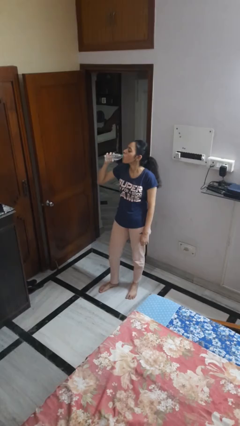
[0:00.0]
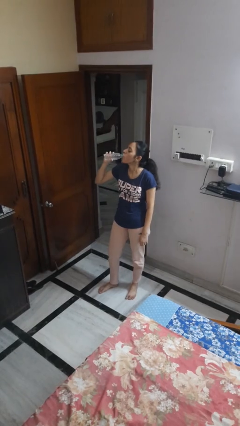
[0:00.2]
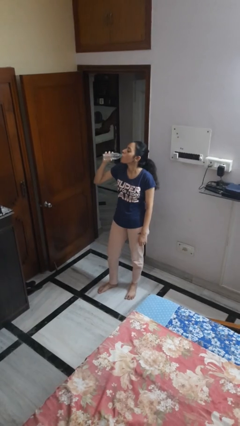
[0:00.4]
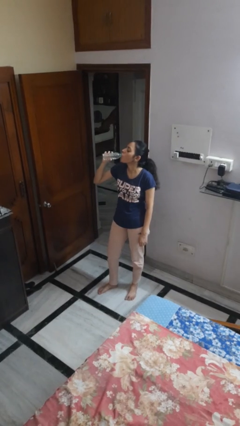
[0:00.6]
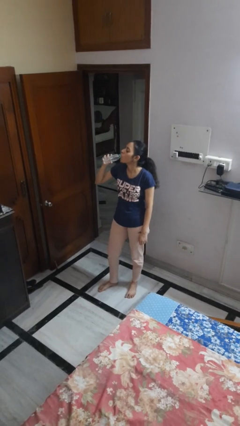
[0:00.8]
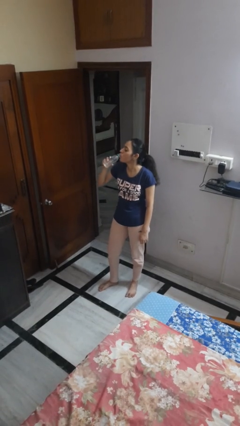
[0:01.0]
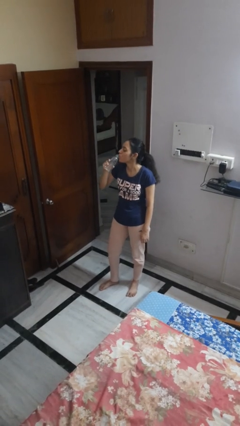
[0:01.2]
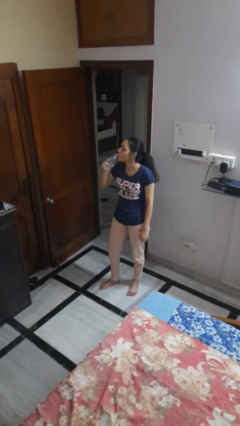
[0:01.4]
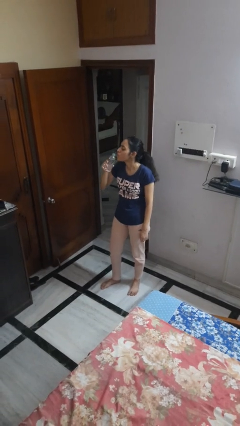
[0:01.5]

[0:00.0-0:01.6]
person drinks from bottle

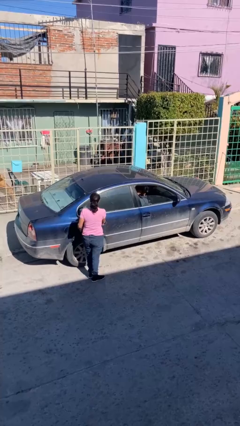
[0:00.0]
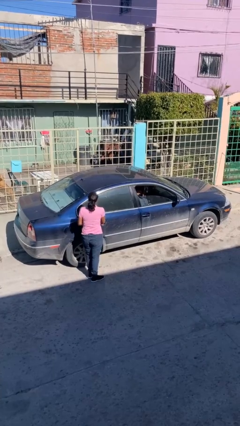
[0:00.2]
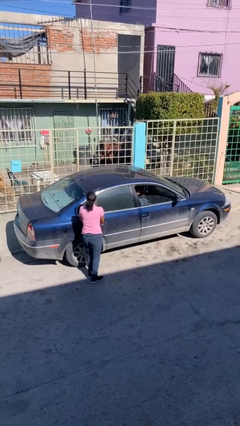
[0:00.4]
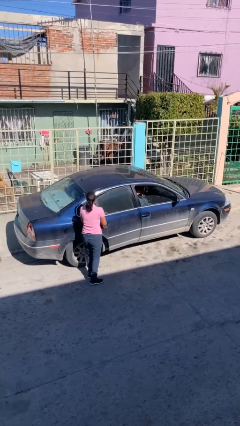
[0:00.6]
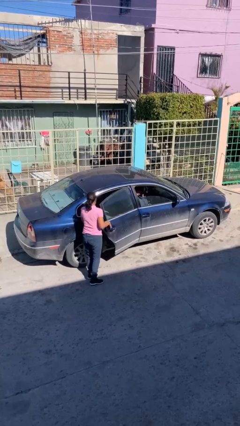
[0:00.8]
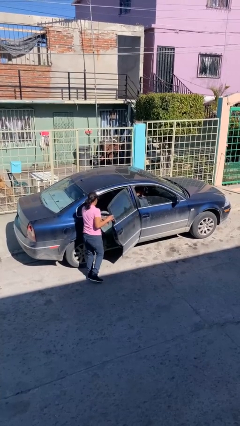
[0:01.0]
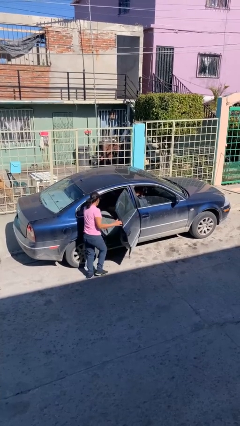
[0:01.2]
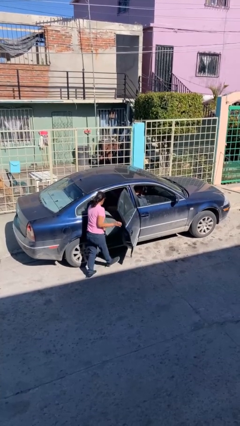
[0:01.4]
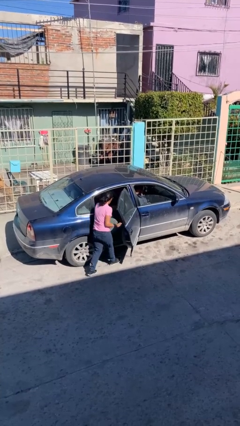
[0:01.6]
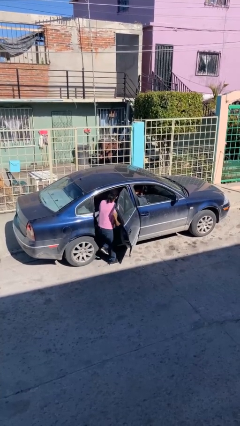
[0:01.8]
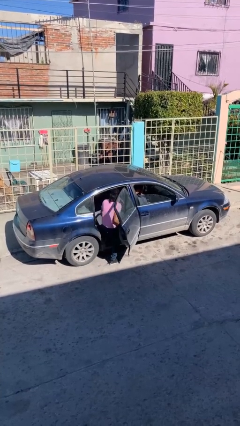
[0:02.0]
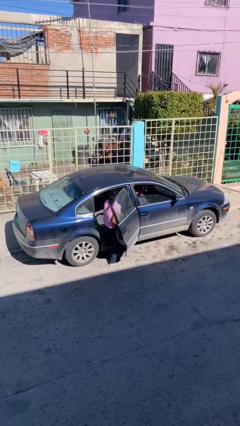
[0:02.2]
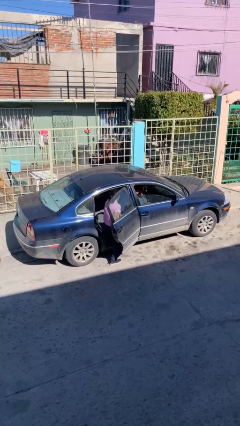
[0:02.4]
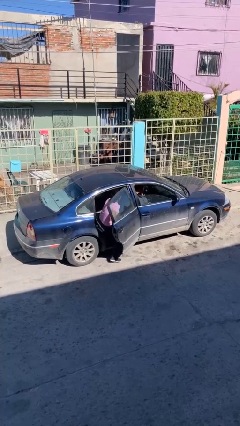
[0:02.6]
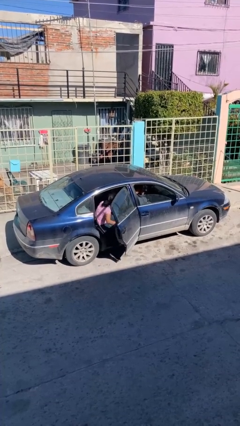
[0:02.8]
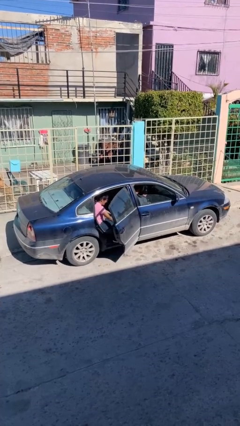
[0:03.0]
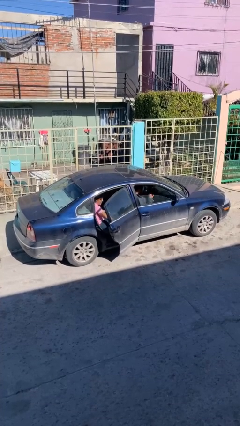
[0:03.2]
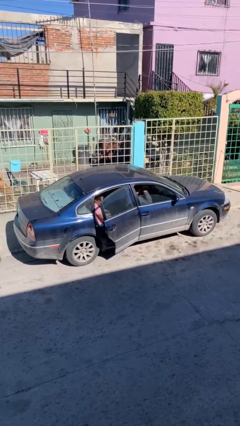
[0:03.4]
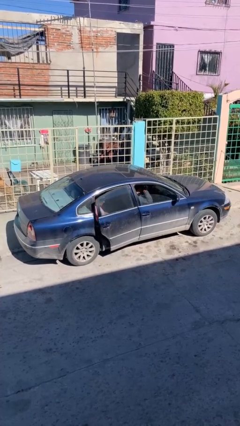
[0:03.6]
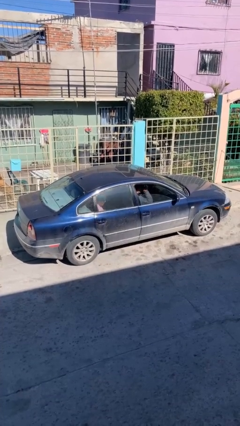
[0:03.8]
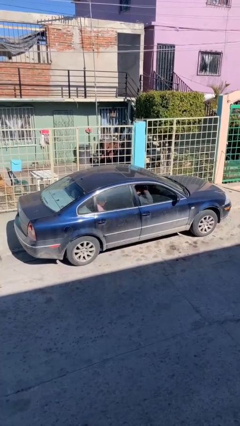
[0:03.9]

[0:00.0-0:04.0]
car picks up person

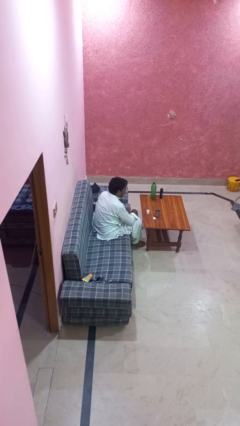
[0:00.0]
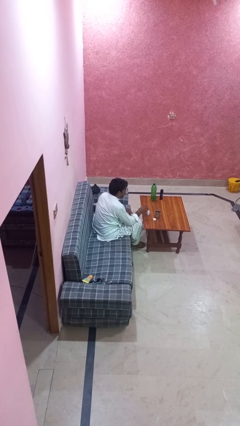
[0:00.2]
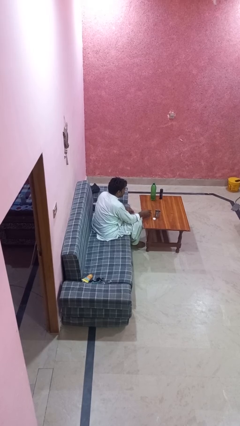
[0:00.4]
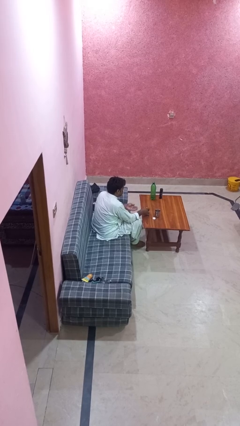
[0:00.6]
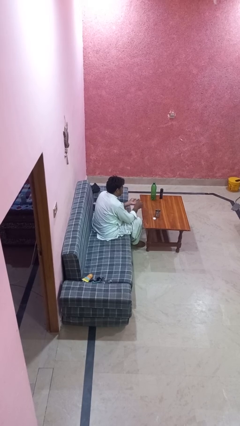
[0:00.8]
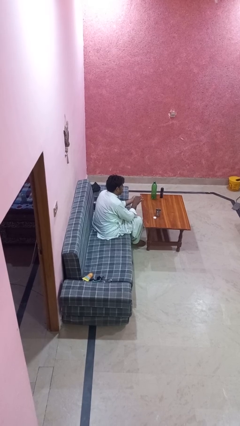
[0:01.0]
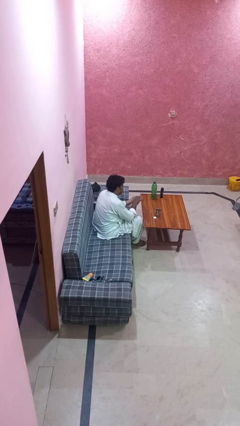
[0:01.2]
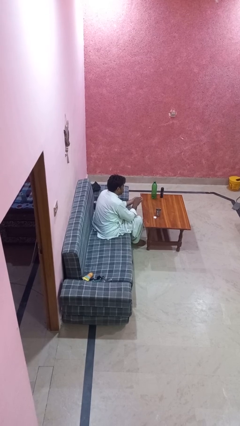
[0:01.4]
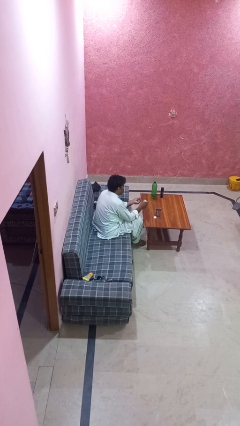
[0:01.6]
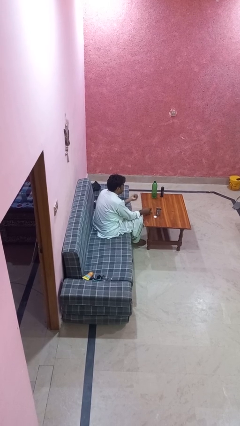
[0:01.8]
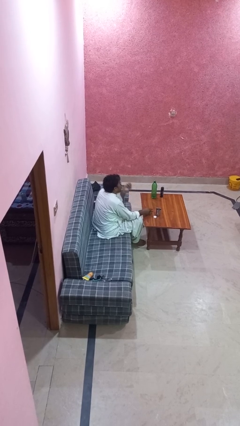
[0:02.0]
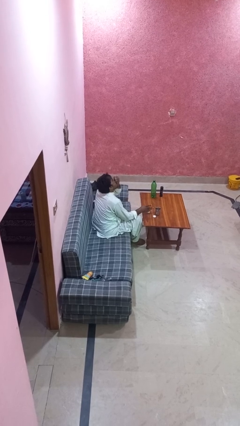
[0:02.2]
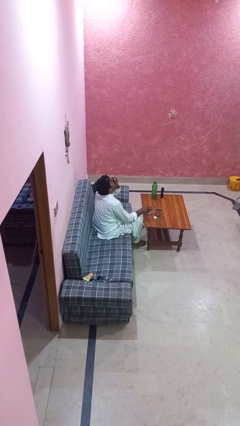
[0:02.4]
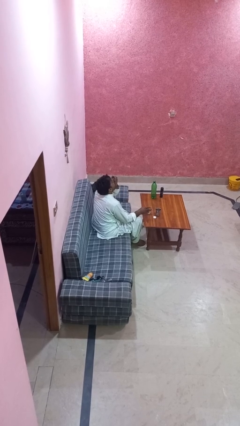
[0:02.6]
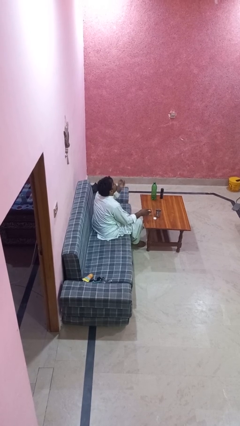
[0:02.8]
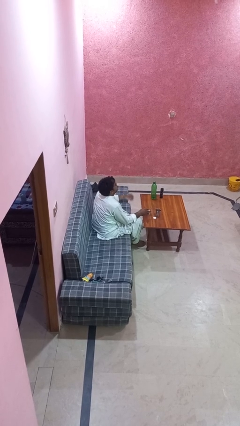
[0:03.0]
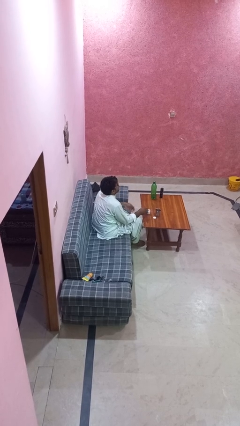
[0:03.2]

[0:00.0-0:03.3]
person takes medicine pills

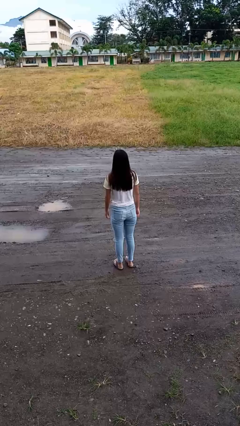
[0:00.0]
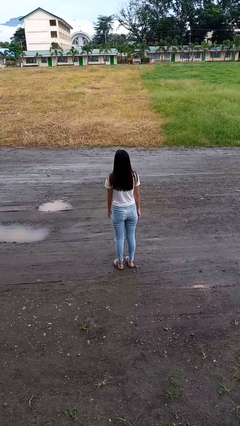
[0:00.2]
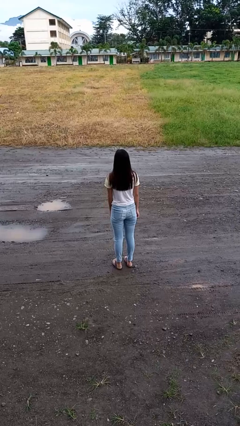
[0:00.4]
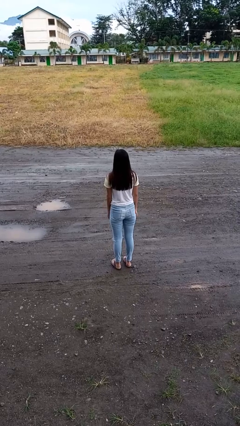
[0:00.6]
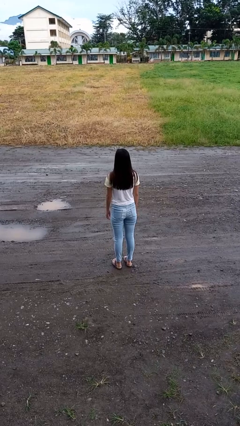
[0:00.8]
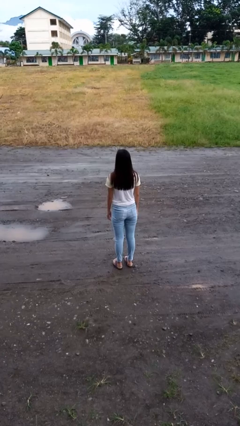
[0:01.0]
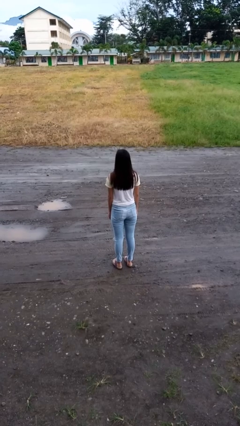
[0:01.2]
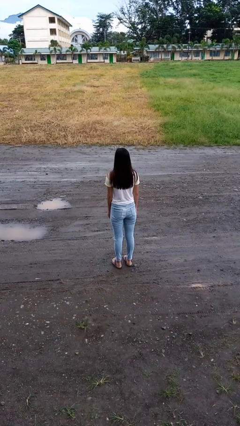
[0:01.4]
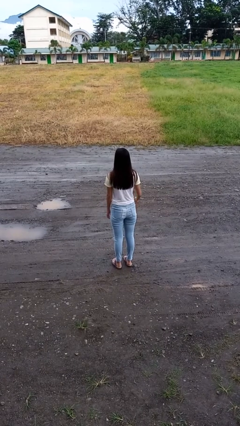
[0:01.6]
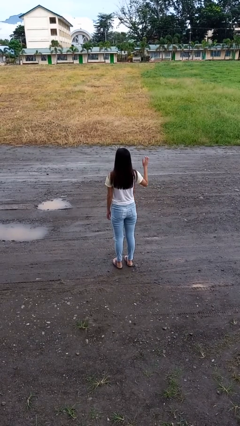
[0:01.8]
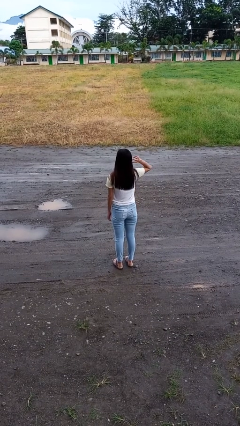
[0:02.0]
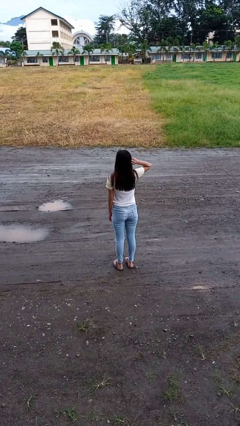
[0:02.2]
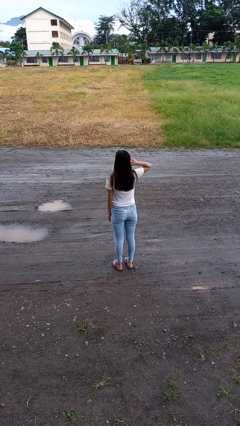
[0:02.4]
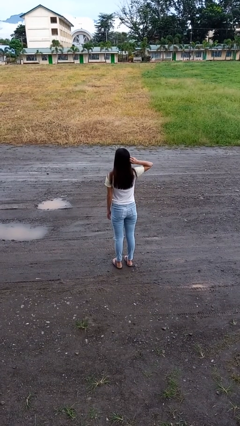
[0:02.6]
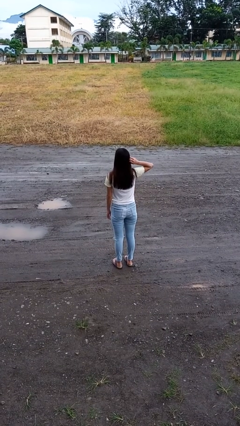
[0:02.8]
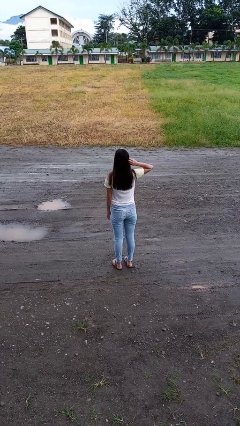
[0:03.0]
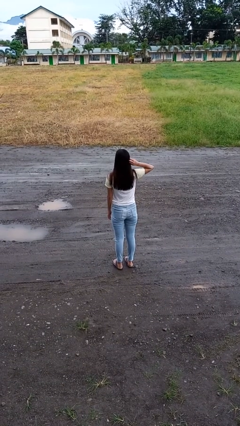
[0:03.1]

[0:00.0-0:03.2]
person scratches face

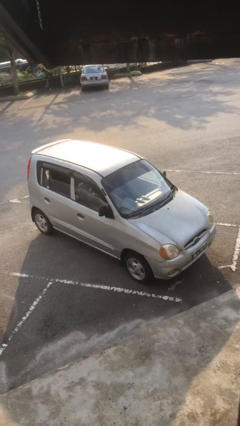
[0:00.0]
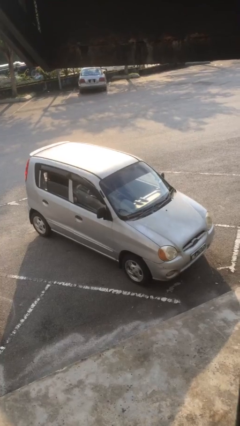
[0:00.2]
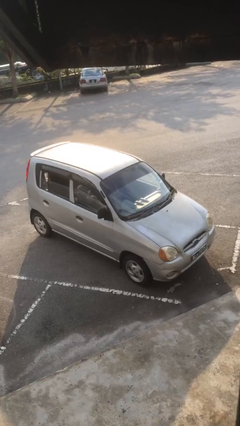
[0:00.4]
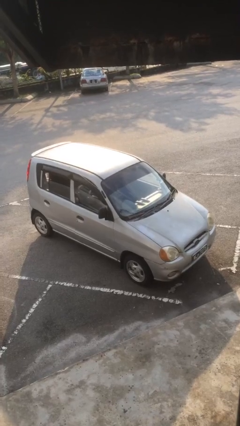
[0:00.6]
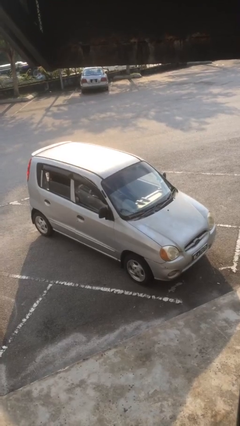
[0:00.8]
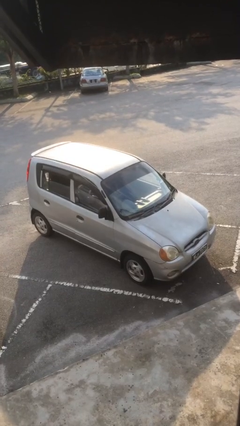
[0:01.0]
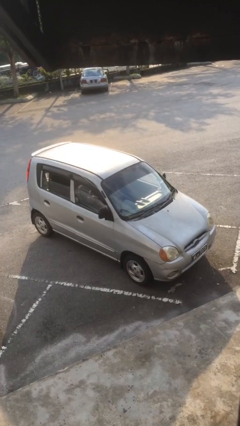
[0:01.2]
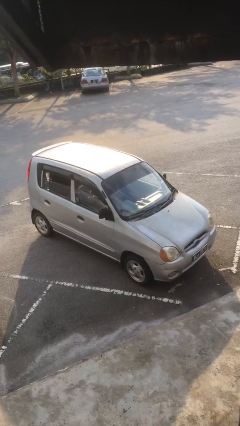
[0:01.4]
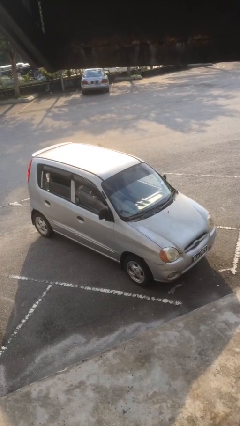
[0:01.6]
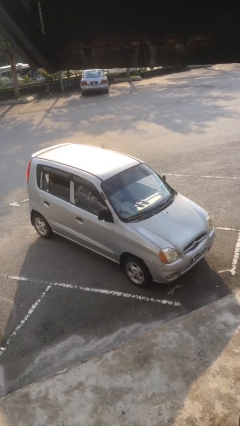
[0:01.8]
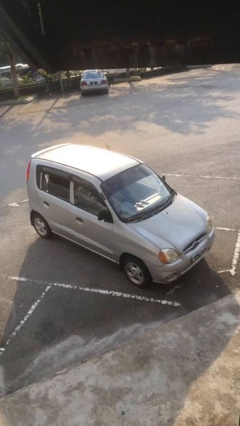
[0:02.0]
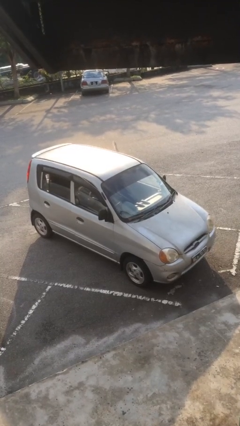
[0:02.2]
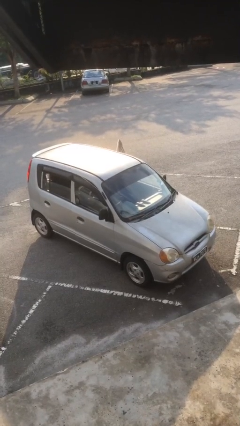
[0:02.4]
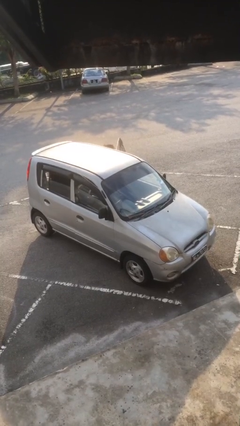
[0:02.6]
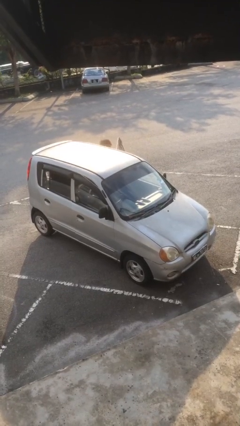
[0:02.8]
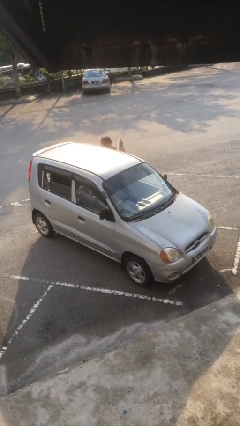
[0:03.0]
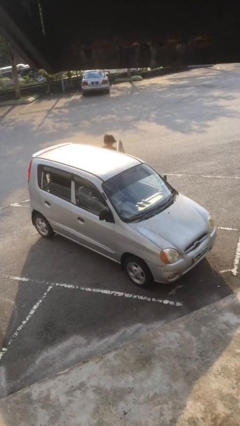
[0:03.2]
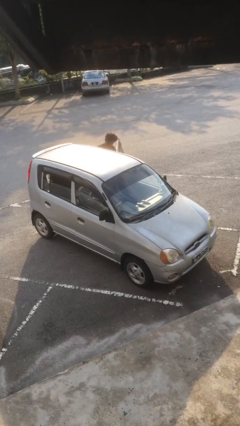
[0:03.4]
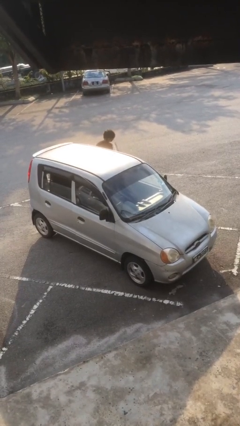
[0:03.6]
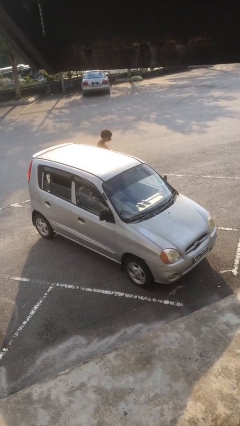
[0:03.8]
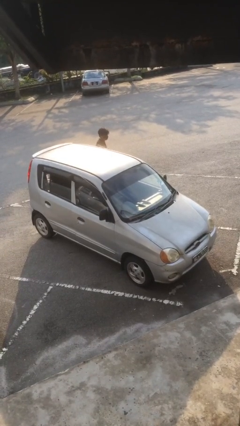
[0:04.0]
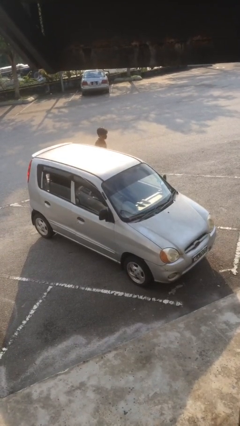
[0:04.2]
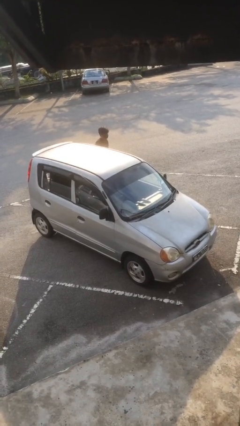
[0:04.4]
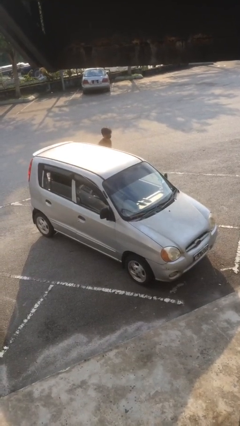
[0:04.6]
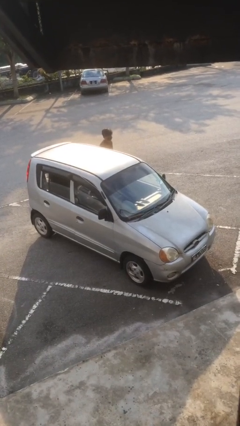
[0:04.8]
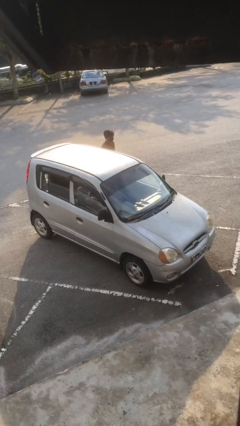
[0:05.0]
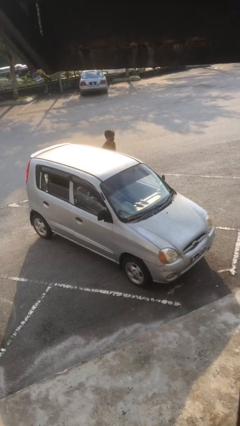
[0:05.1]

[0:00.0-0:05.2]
car drops off person

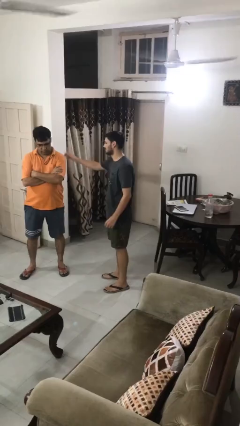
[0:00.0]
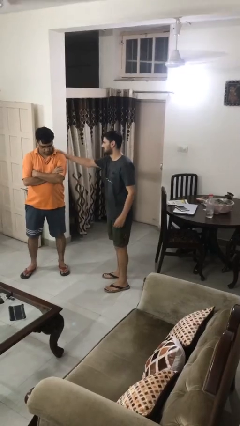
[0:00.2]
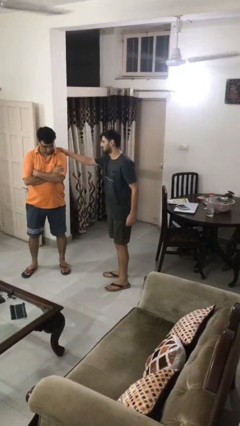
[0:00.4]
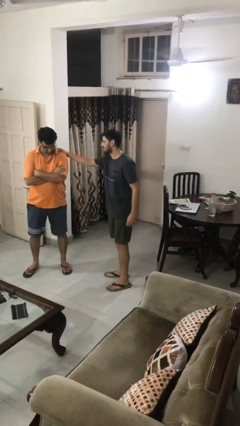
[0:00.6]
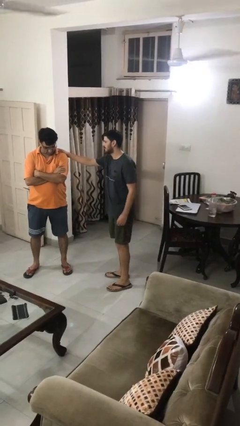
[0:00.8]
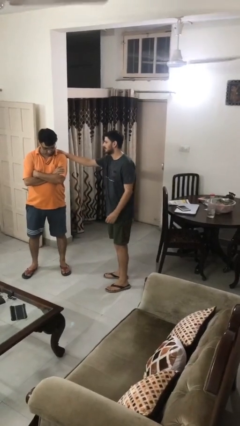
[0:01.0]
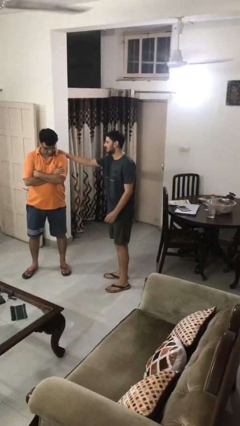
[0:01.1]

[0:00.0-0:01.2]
person pounds shoulders of person
